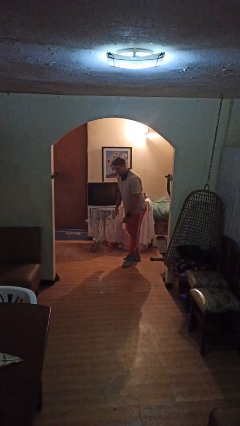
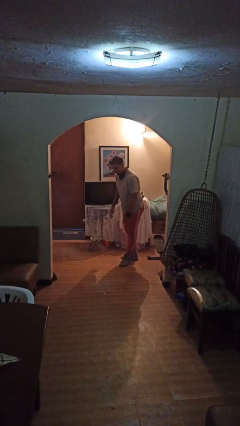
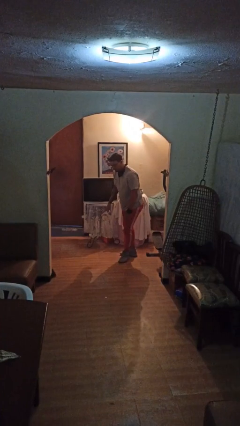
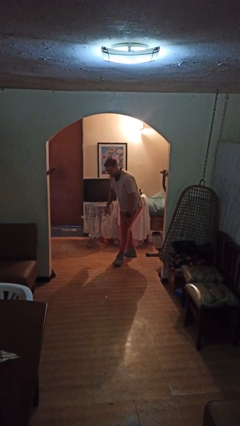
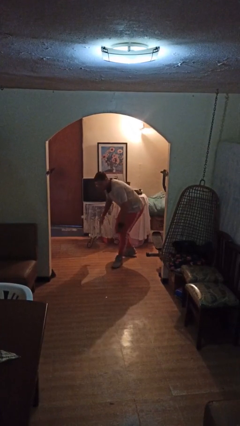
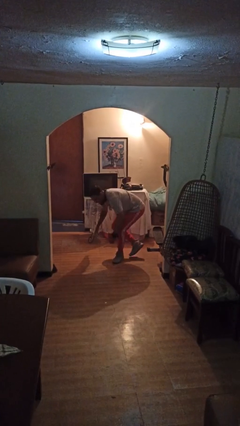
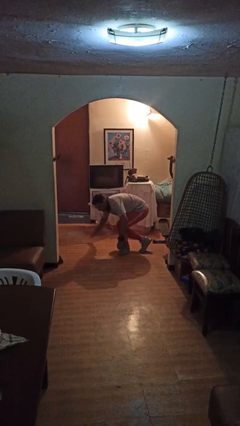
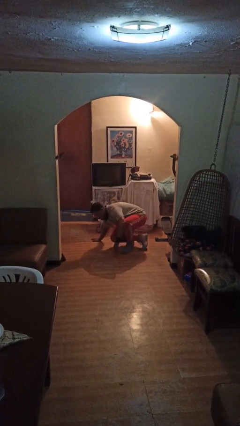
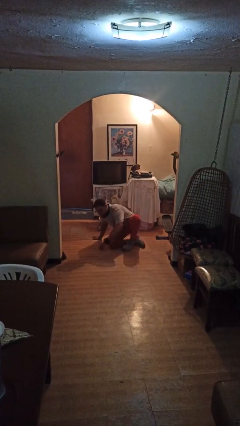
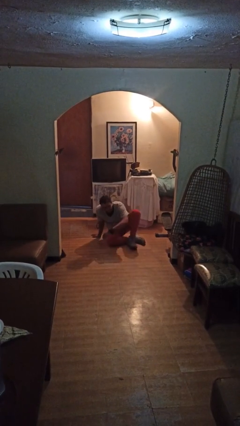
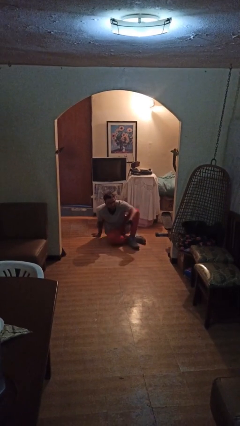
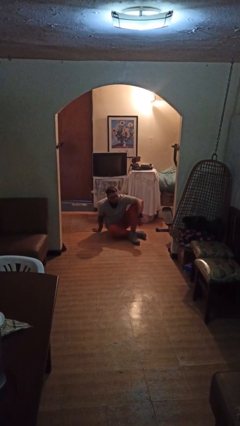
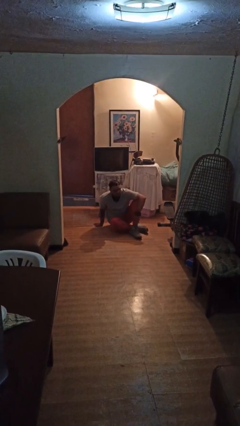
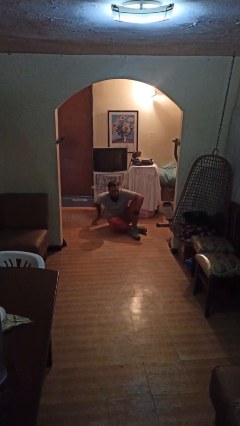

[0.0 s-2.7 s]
person sits down

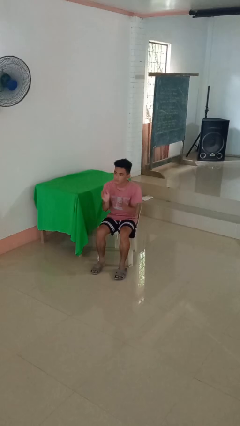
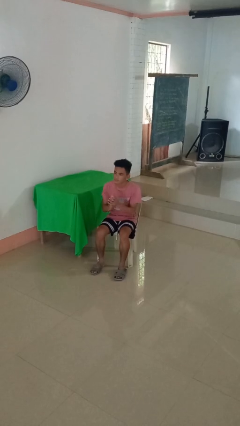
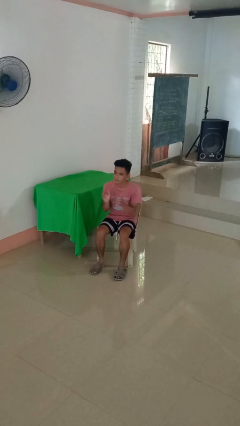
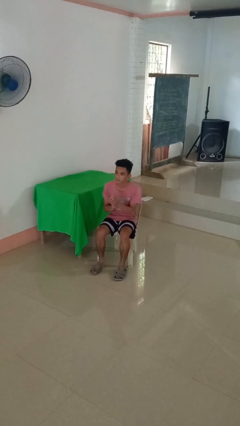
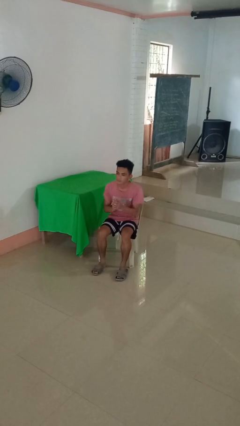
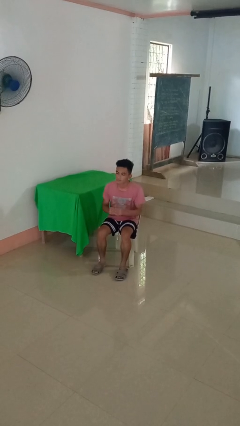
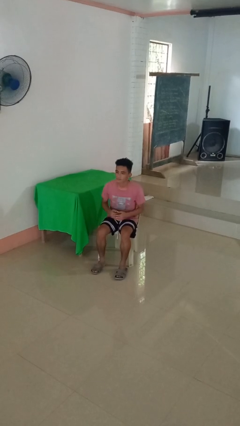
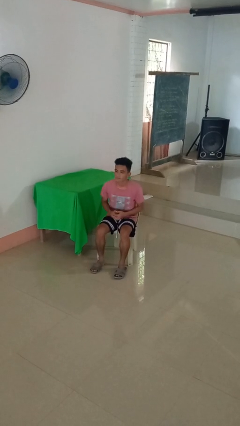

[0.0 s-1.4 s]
person claps hands

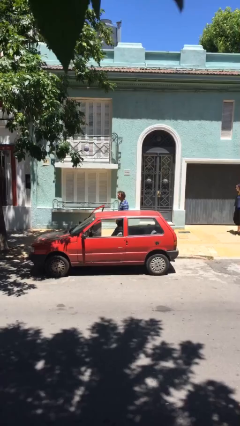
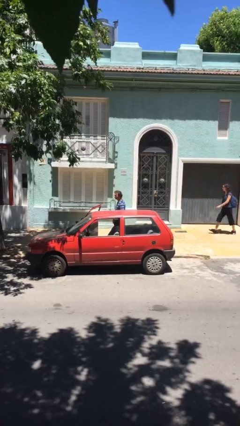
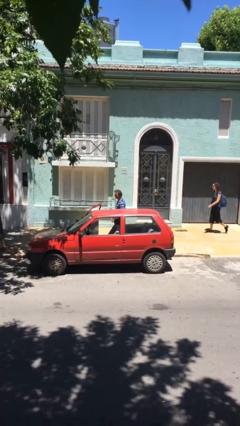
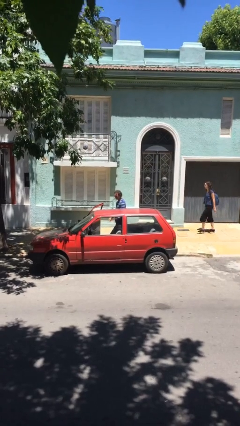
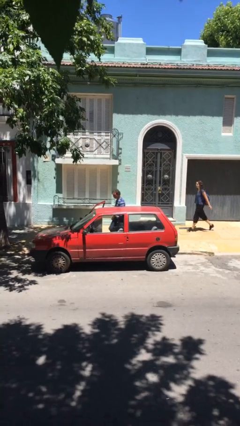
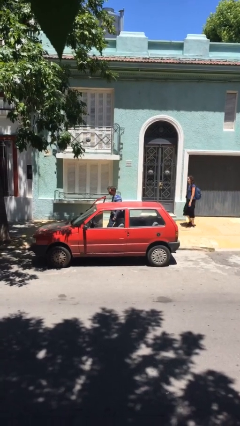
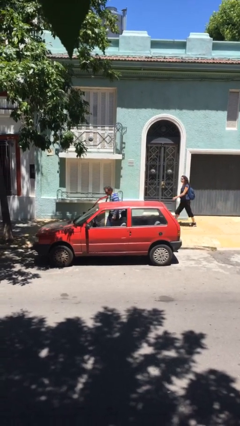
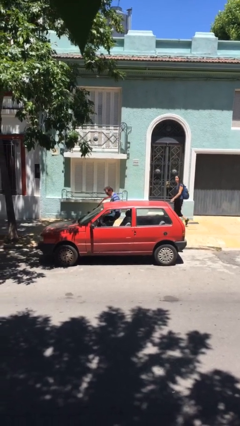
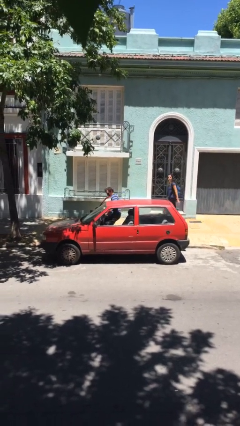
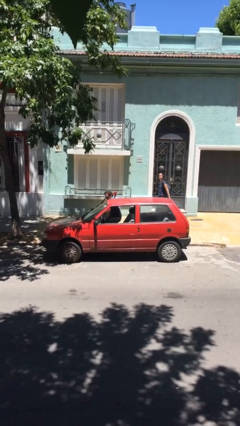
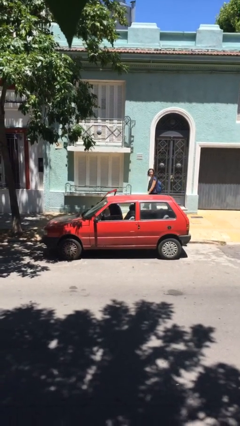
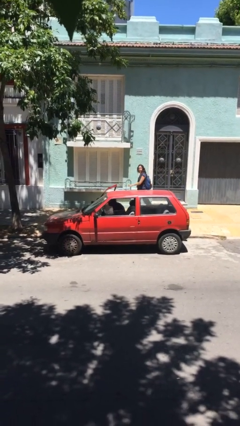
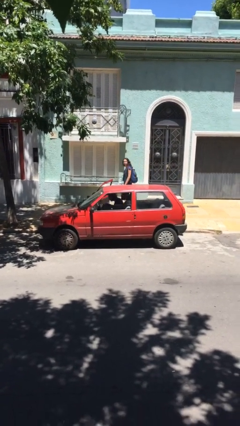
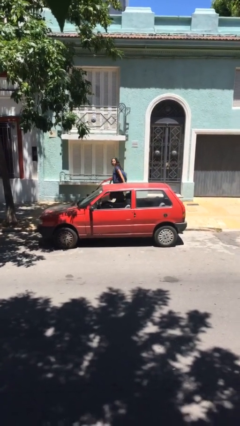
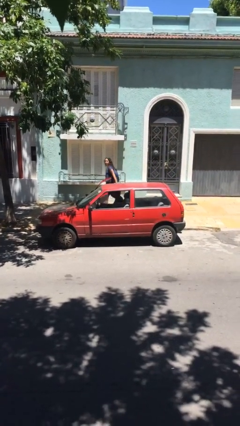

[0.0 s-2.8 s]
person enters car

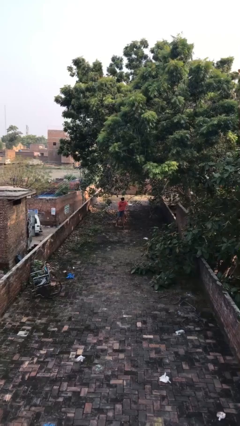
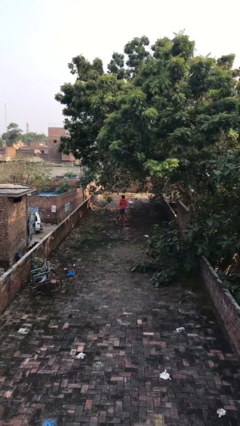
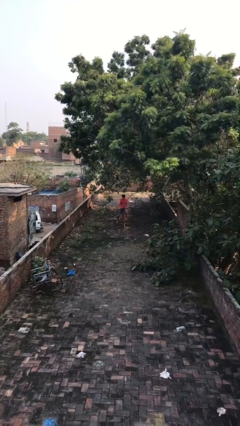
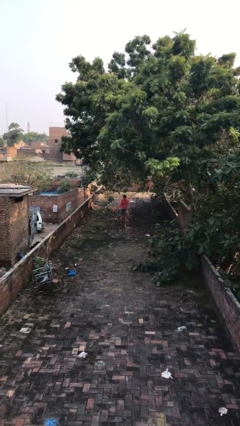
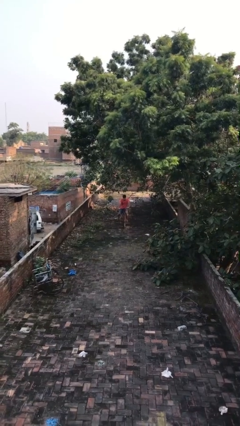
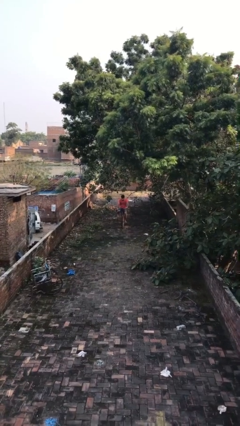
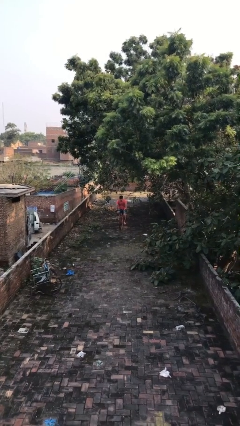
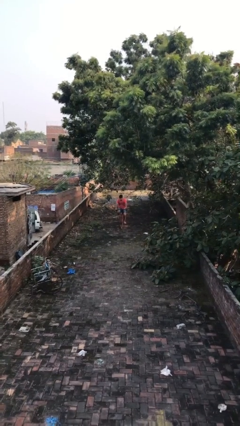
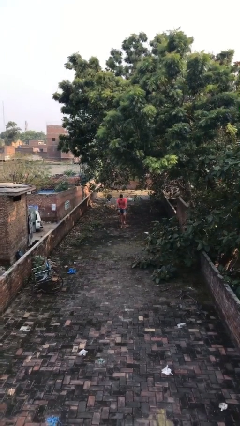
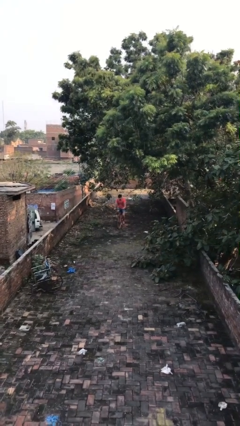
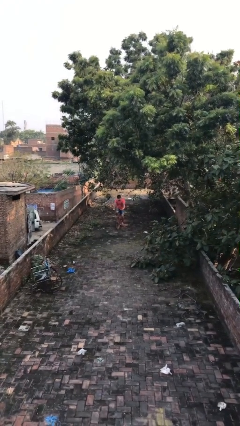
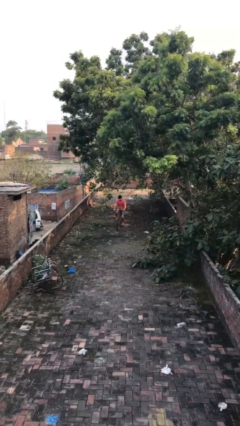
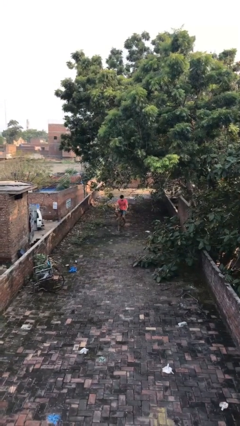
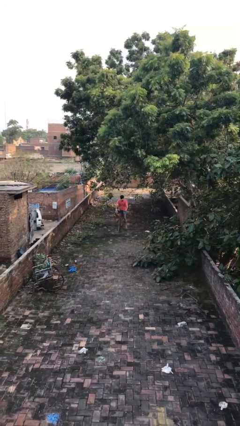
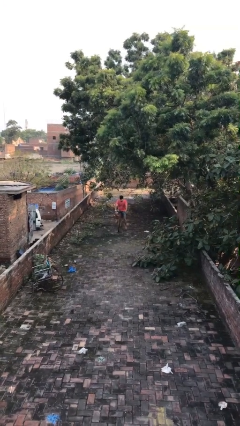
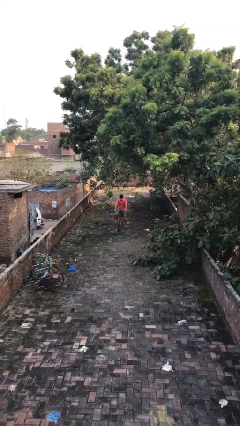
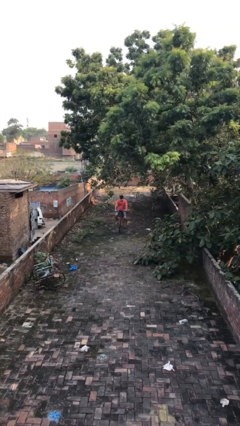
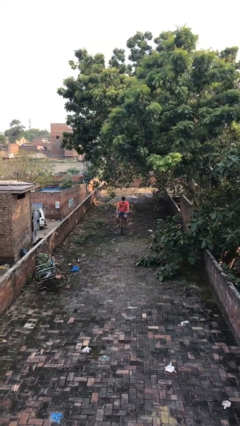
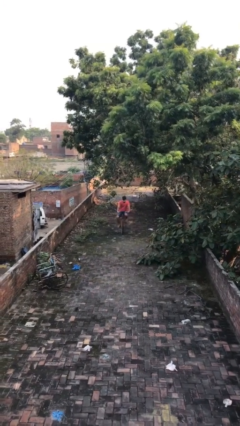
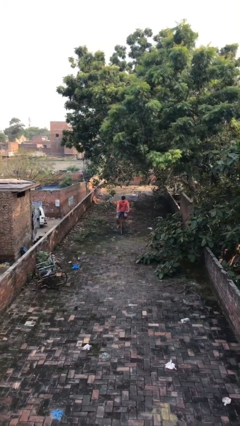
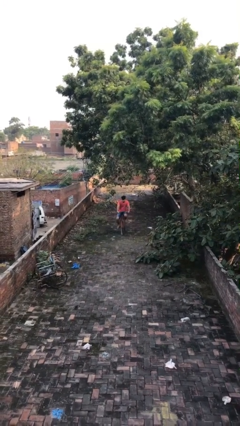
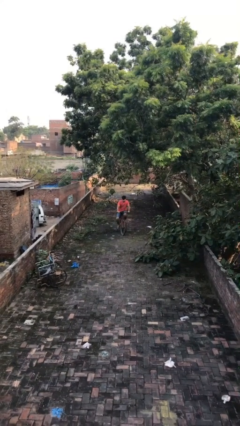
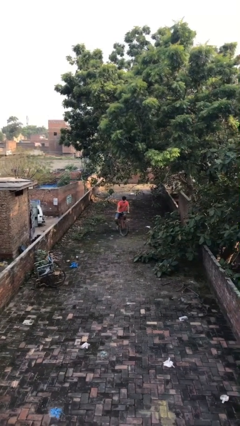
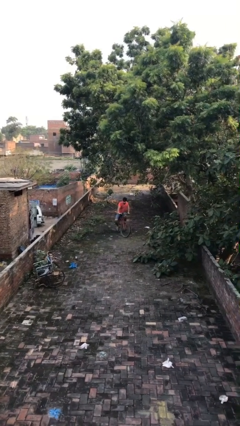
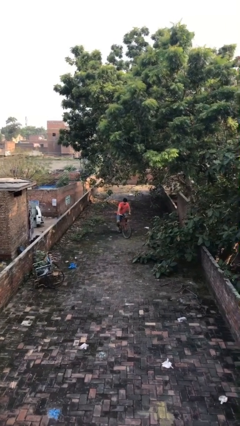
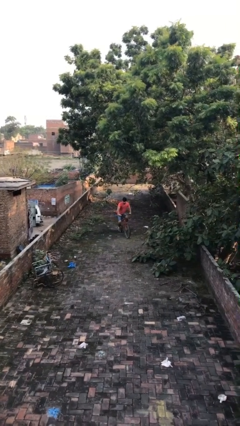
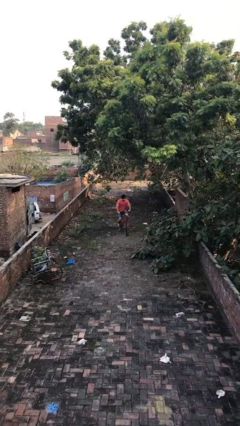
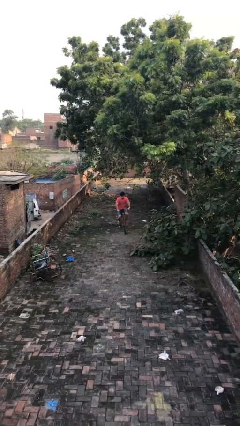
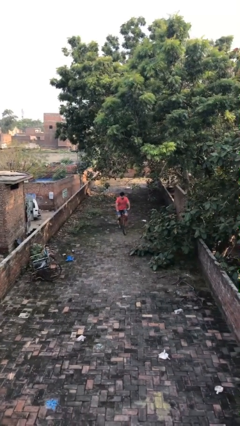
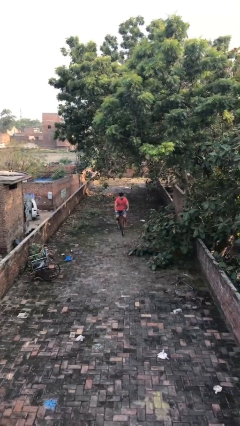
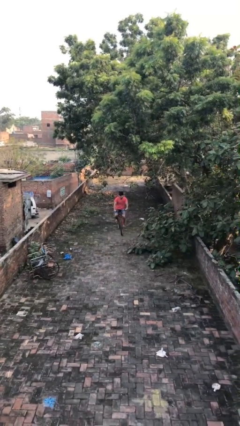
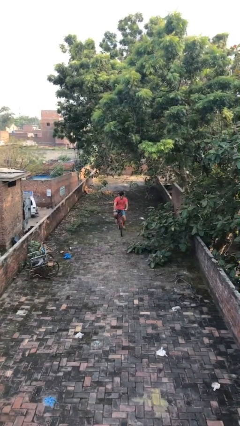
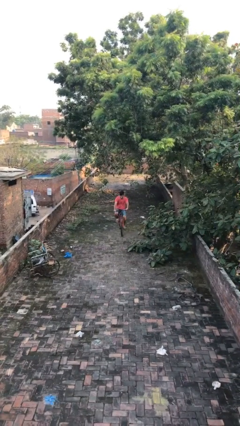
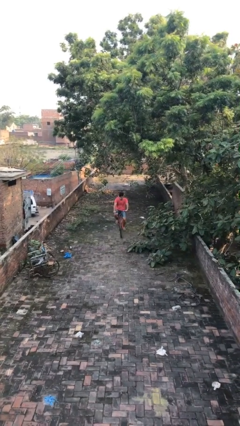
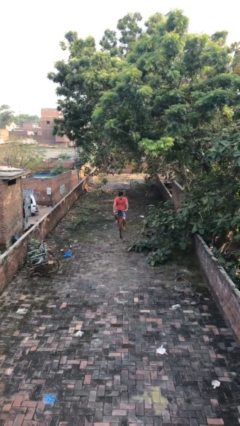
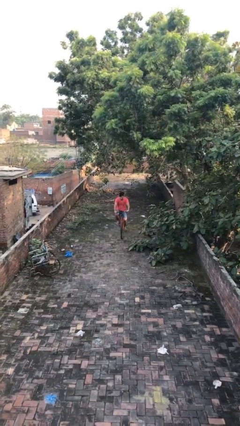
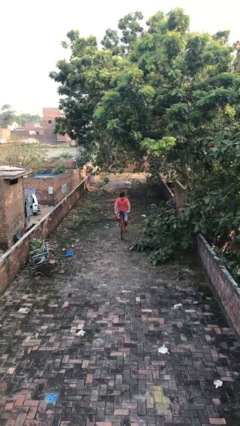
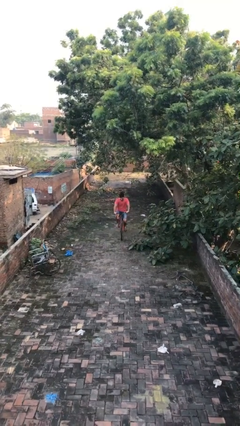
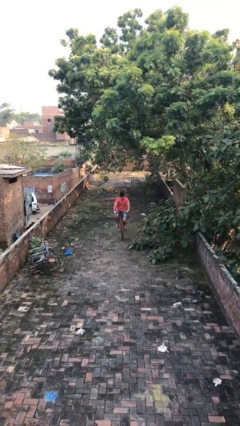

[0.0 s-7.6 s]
person rides bicycle

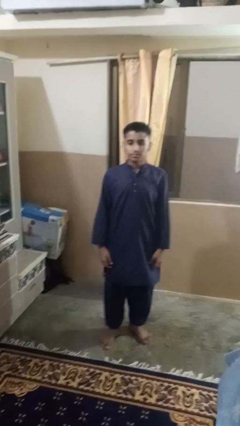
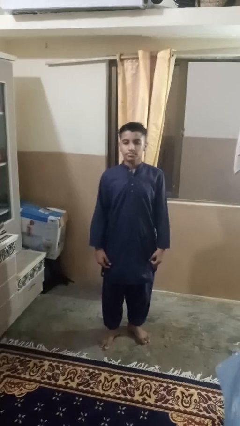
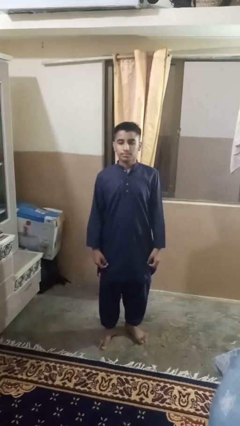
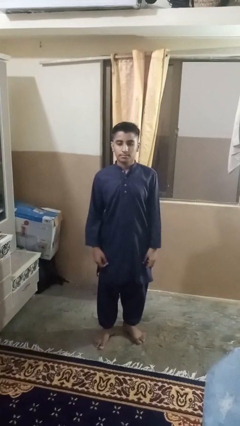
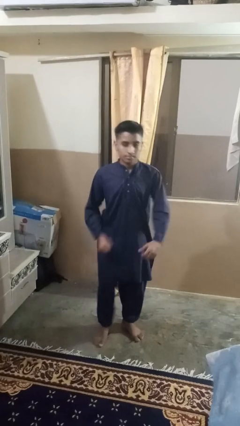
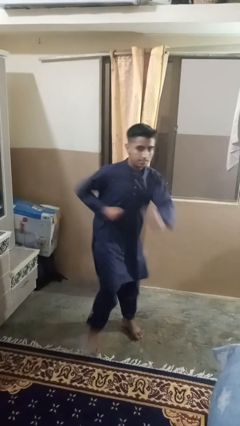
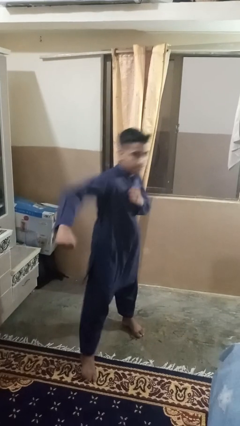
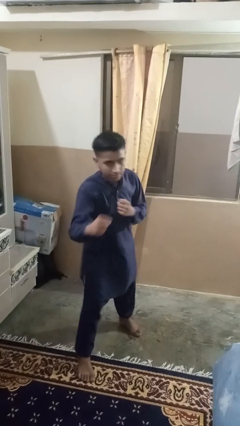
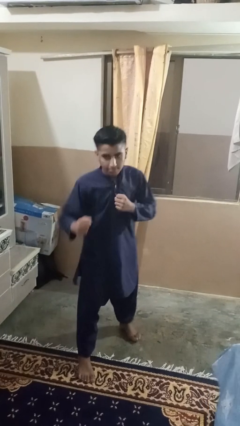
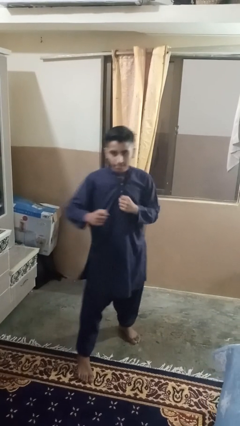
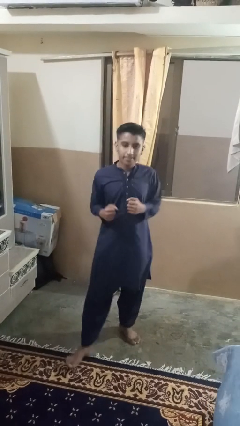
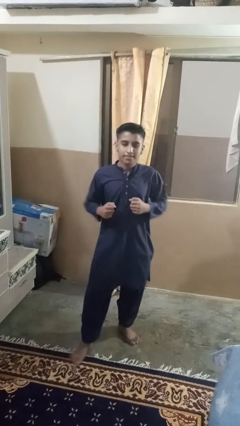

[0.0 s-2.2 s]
person karate chop

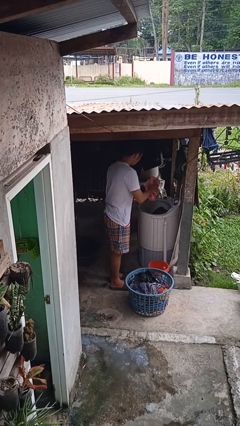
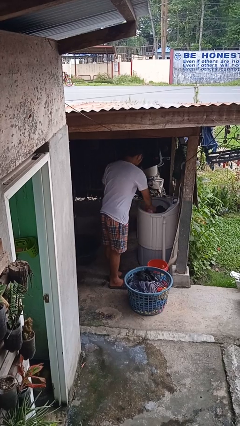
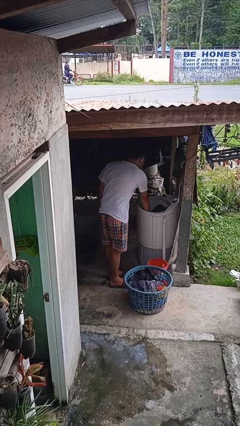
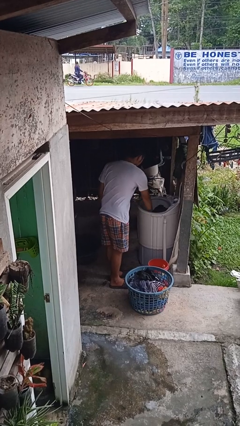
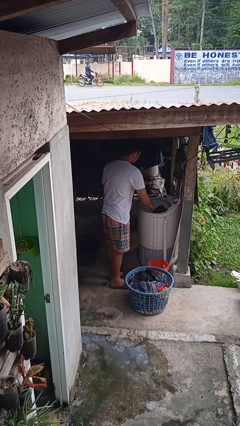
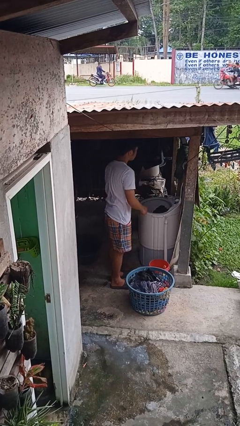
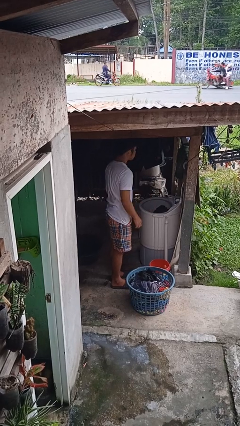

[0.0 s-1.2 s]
person loads clotheswasher
